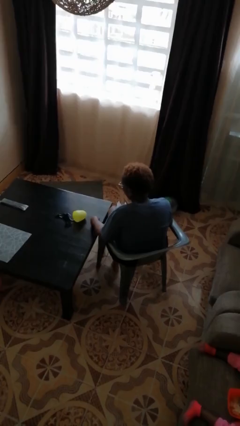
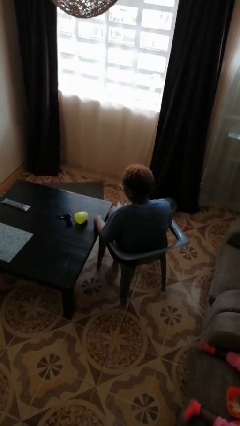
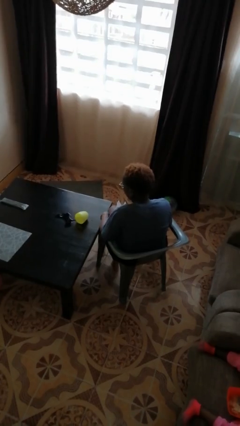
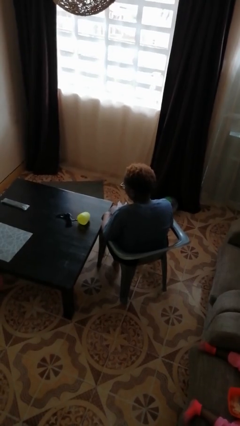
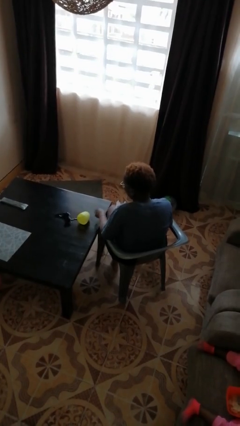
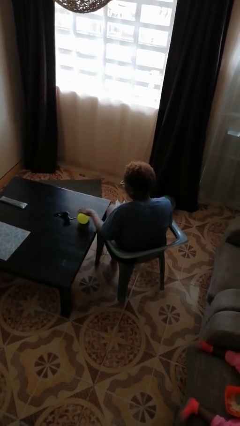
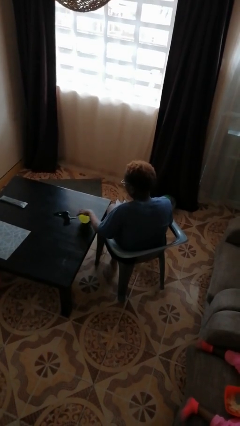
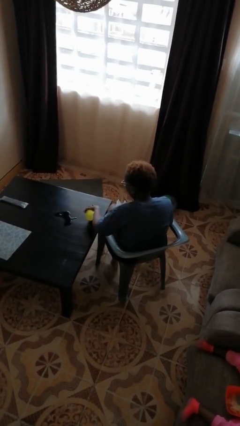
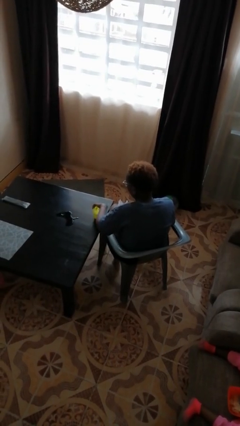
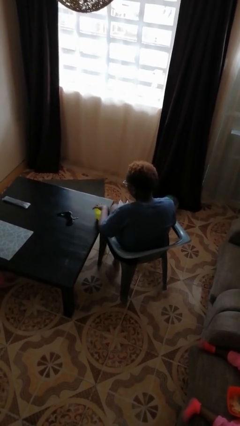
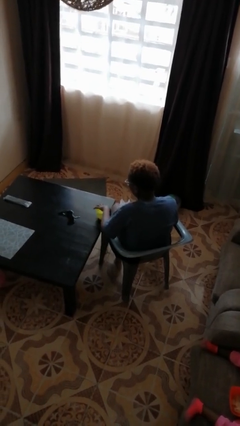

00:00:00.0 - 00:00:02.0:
person sets upright glass

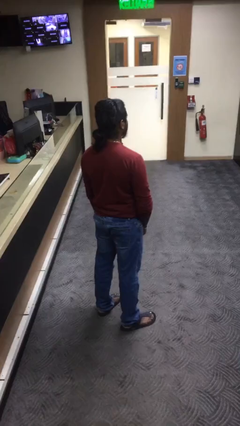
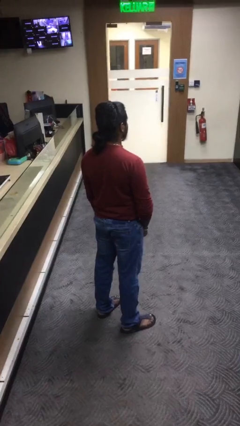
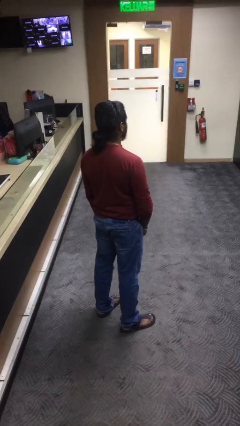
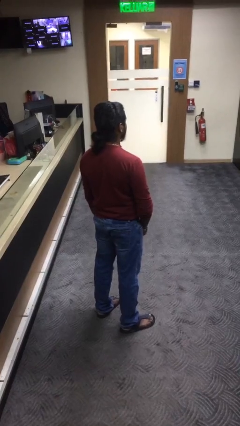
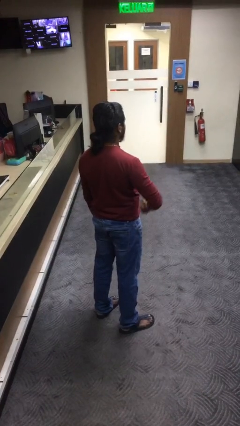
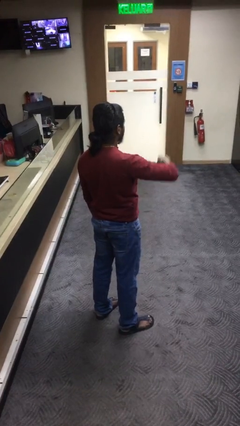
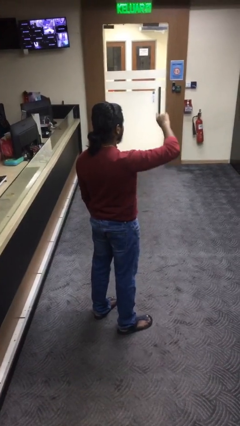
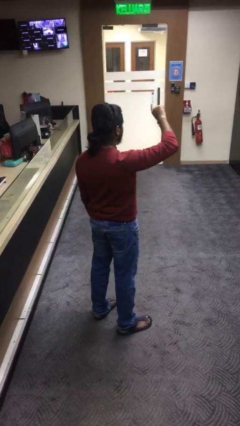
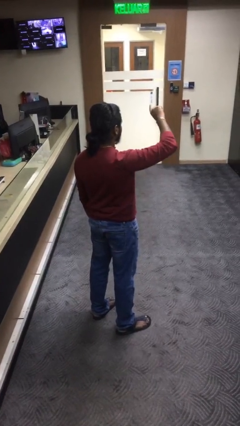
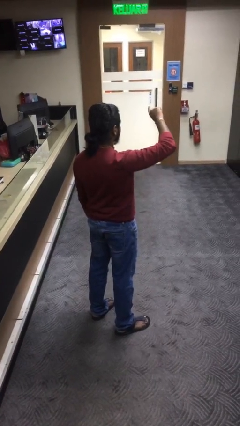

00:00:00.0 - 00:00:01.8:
person gestures swipe up

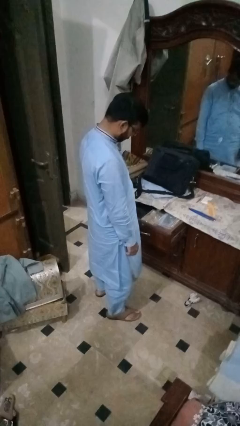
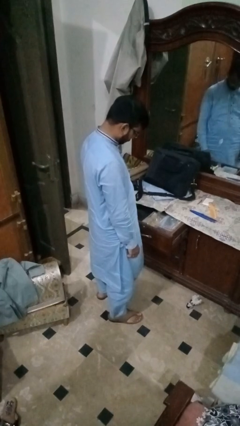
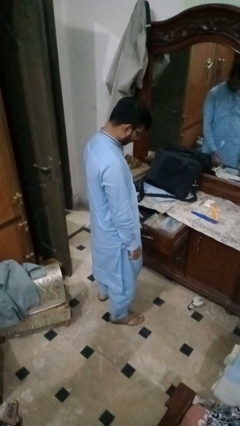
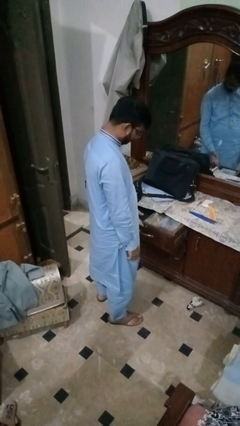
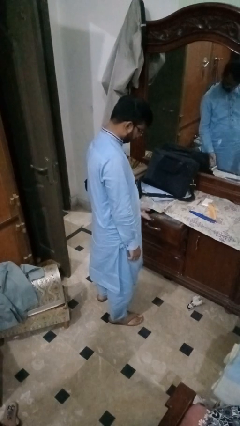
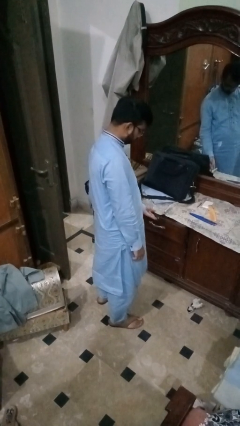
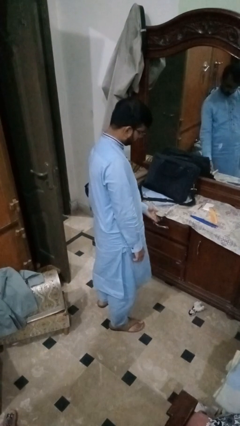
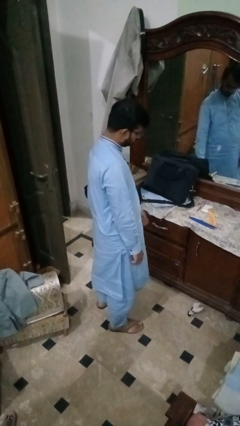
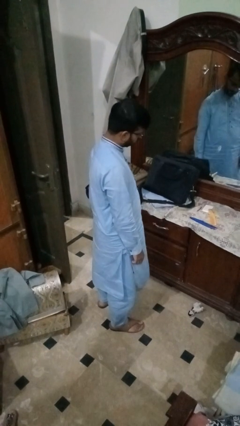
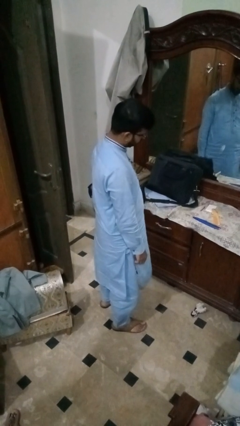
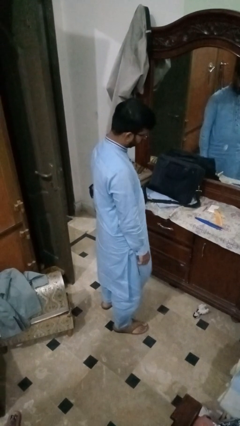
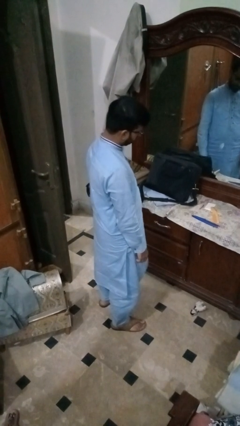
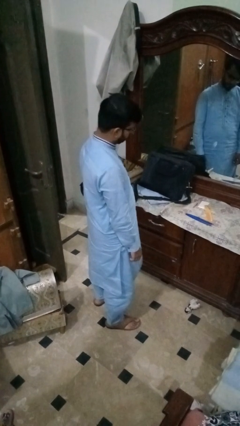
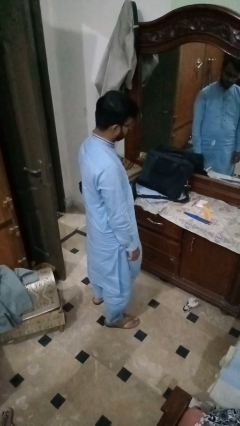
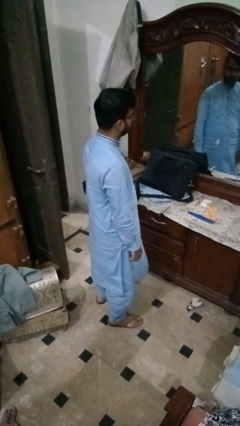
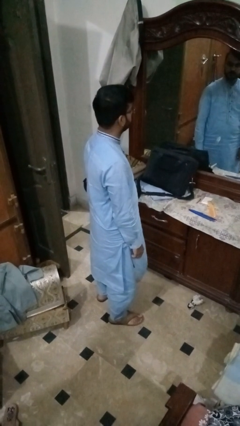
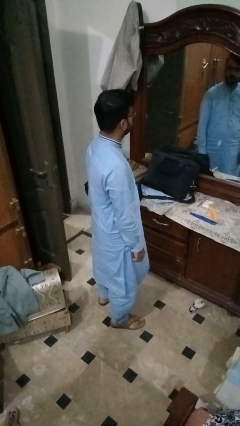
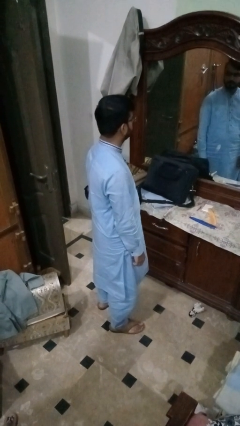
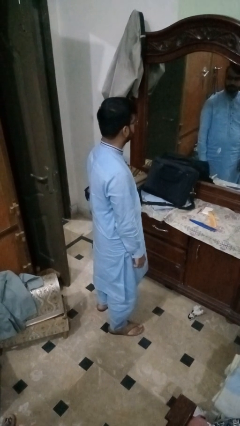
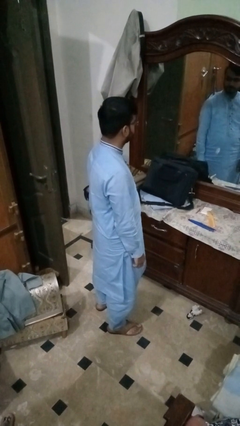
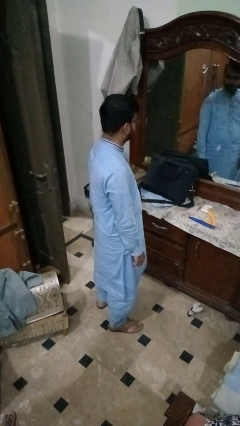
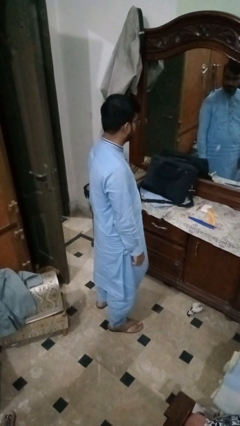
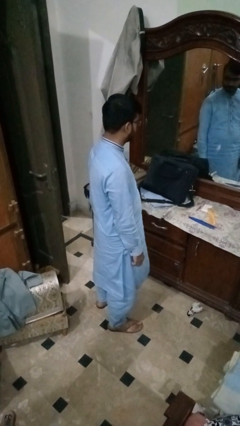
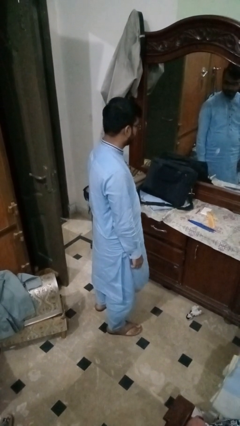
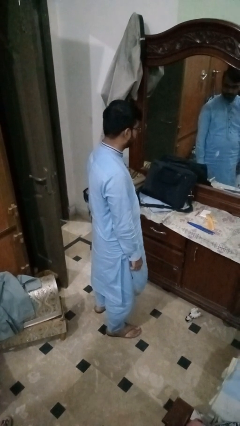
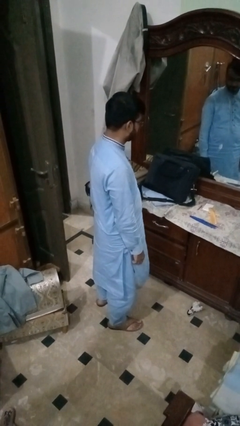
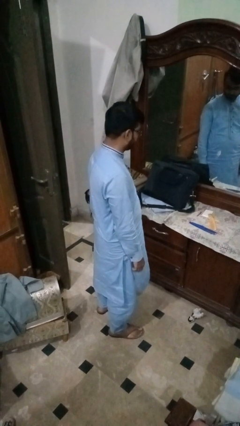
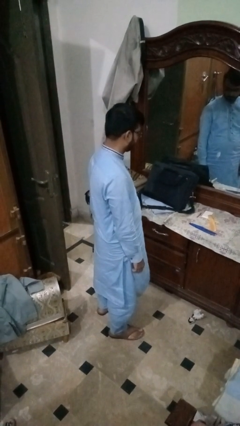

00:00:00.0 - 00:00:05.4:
person closes dresser drawer

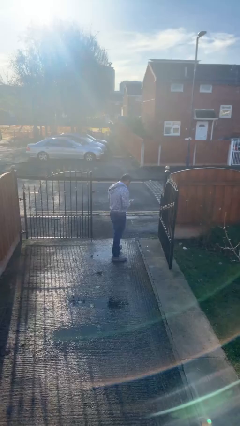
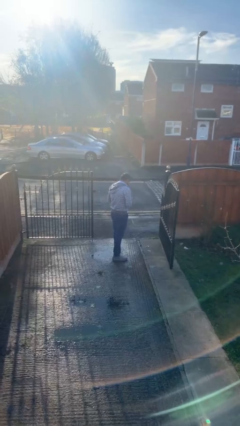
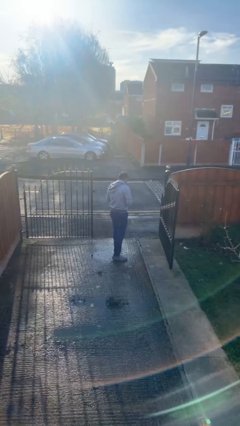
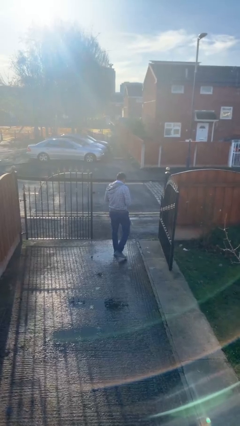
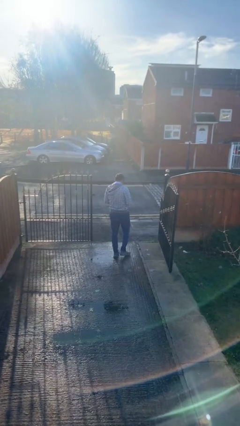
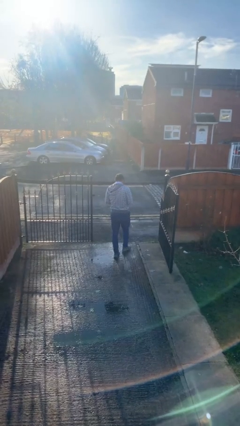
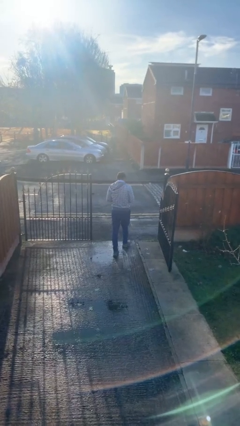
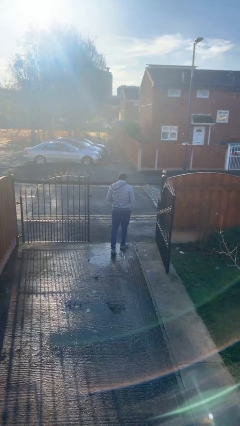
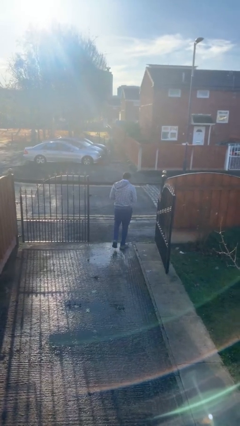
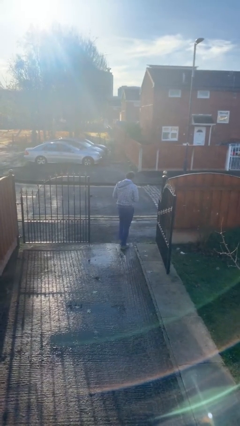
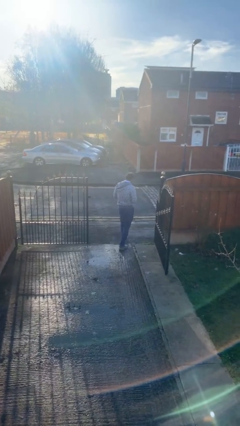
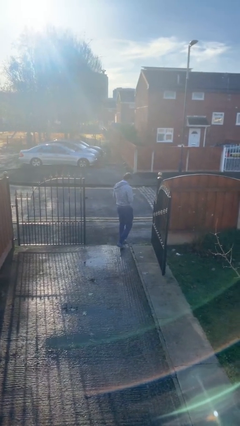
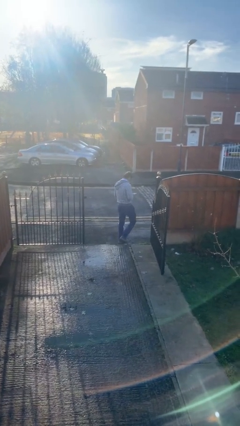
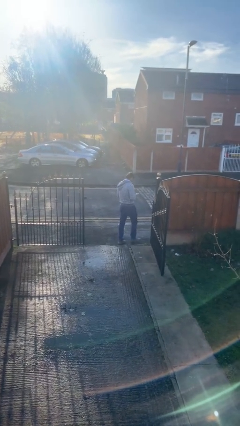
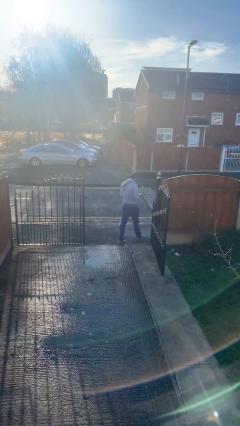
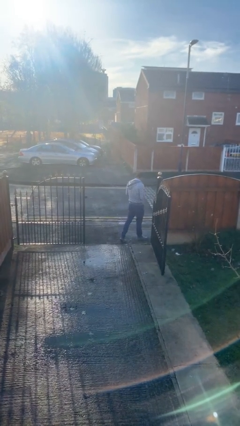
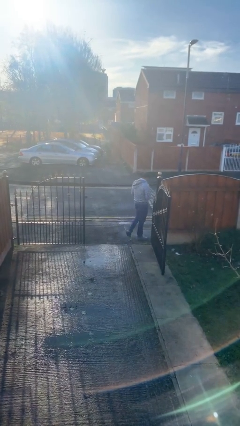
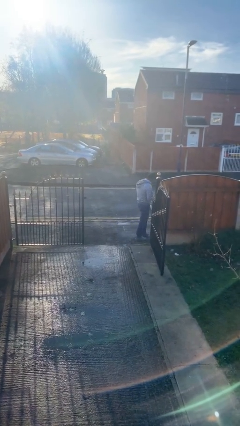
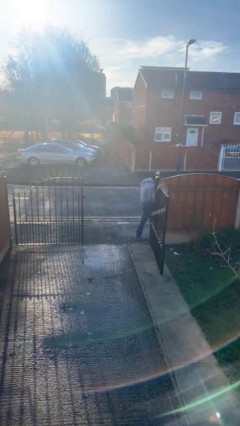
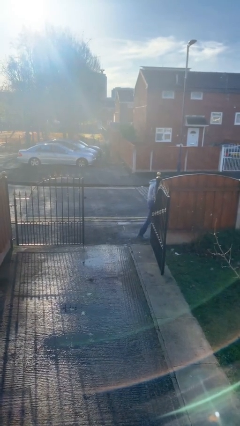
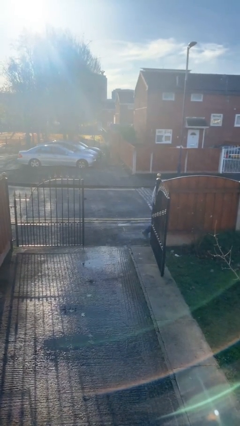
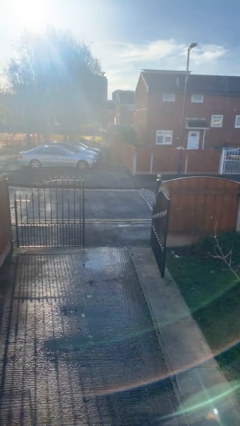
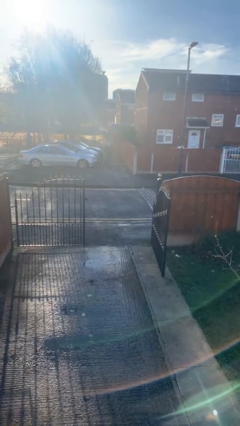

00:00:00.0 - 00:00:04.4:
person exits scene through structure

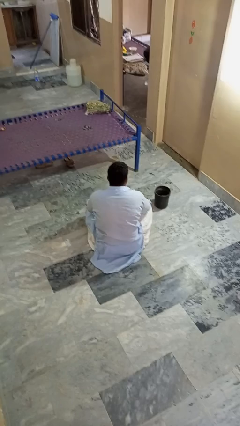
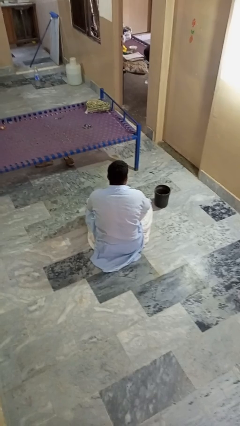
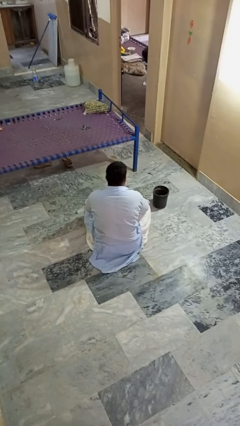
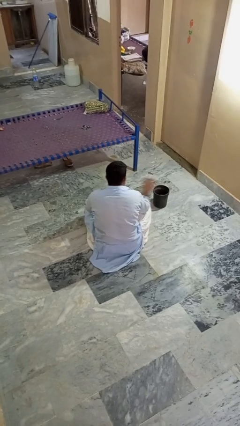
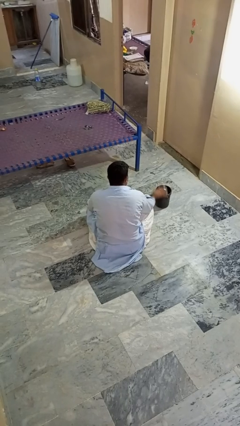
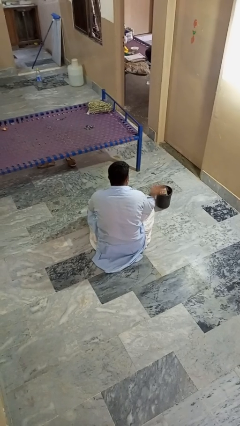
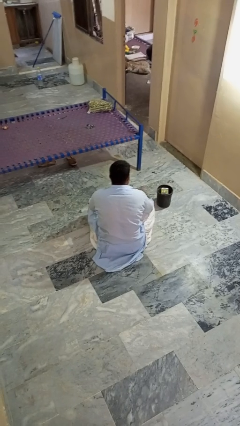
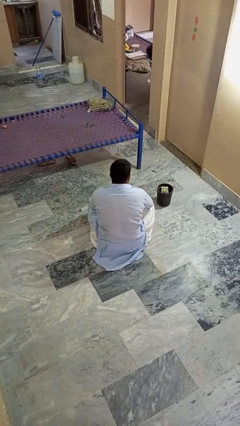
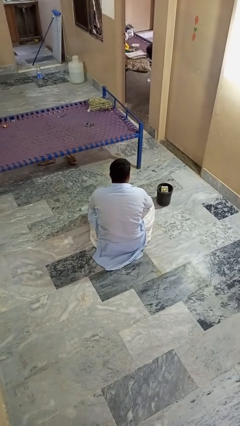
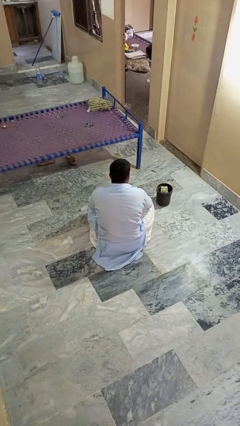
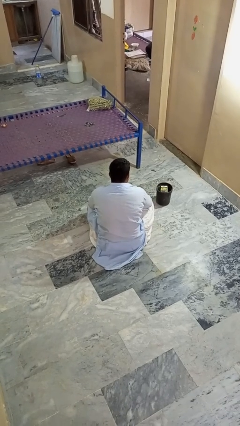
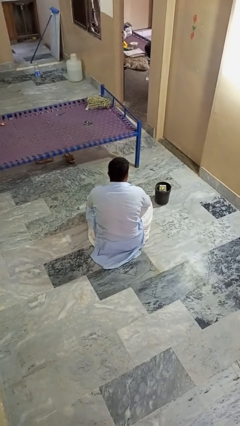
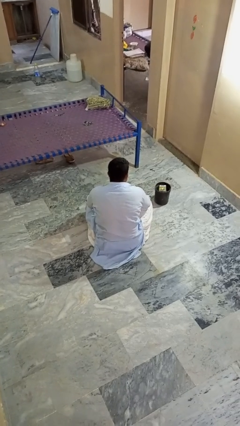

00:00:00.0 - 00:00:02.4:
person puts object into basket

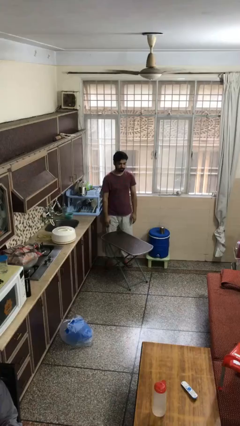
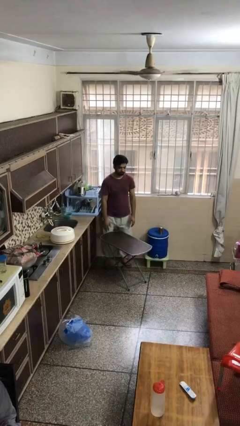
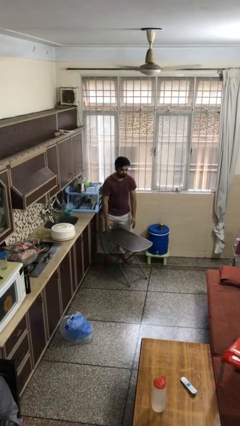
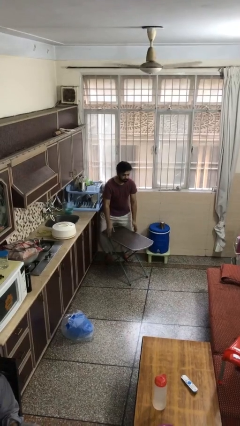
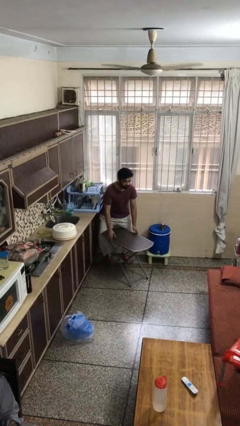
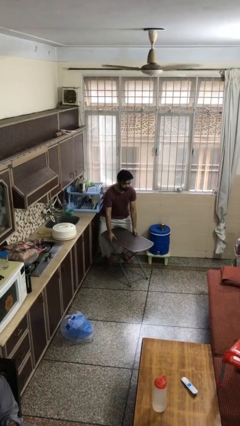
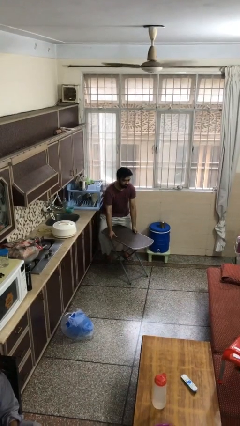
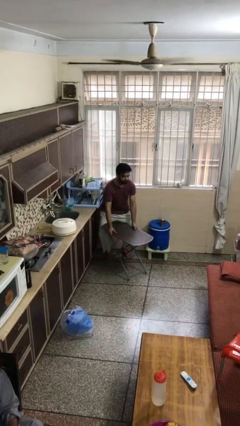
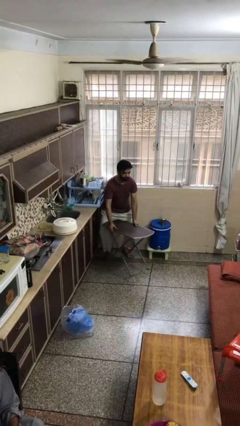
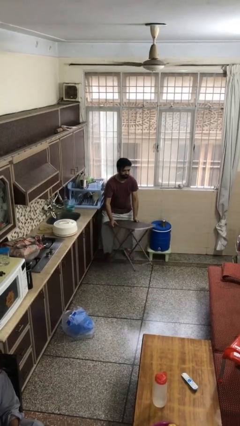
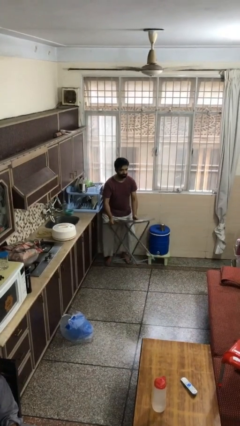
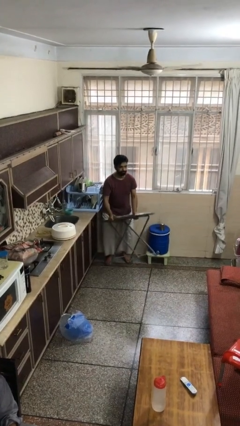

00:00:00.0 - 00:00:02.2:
person picks up object from floor
